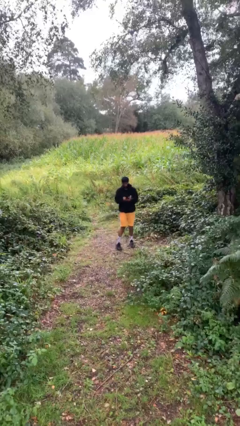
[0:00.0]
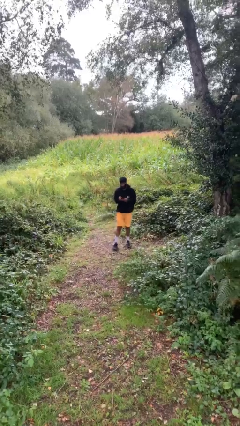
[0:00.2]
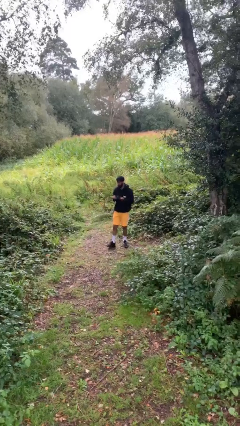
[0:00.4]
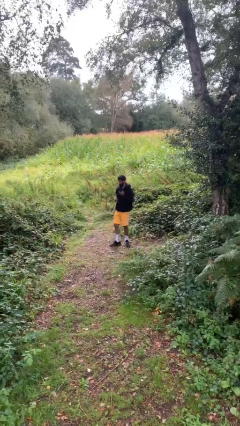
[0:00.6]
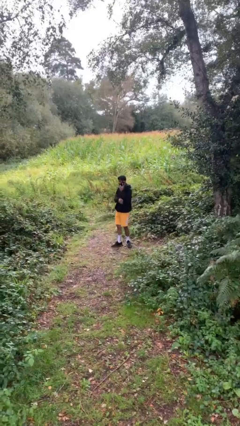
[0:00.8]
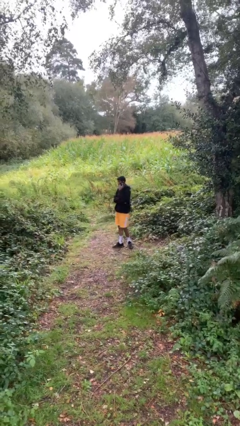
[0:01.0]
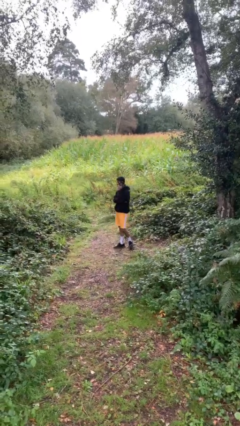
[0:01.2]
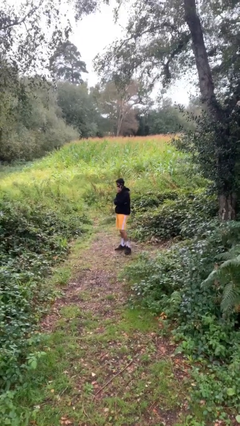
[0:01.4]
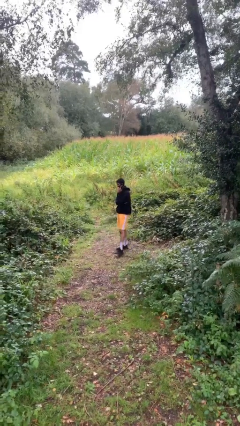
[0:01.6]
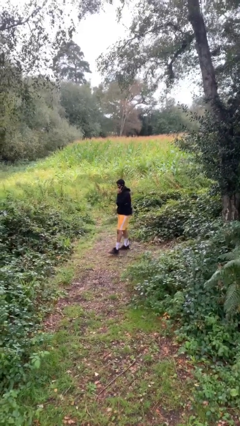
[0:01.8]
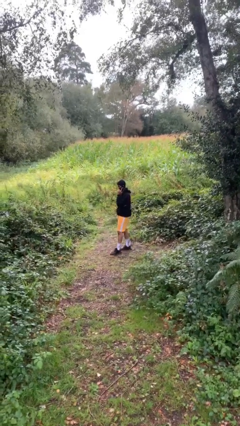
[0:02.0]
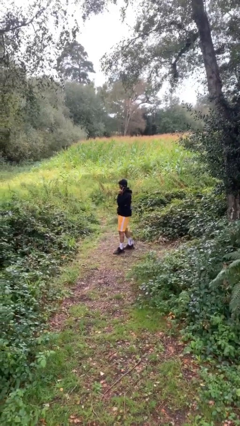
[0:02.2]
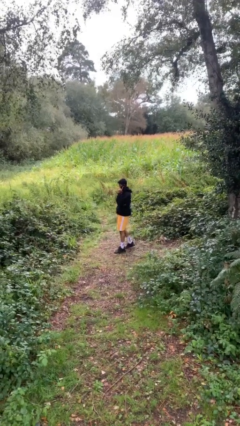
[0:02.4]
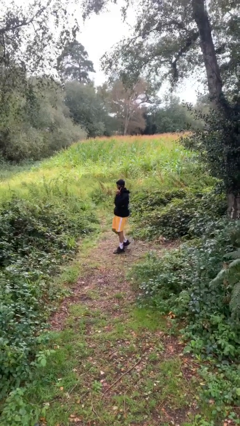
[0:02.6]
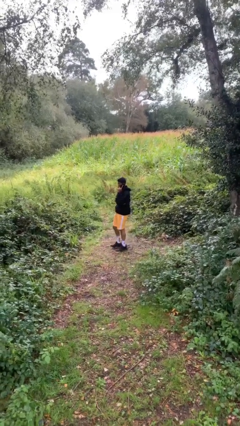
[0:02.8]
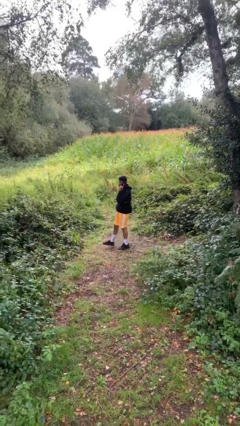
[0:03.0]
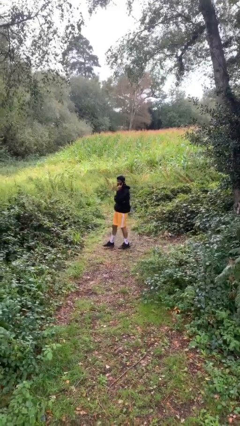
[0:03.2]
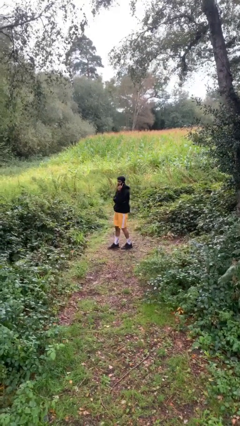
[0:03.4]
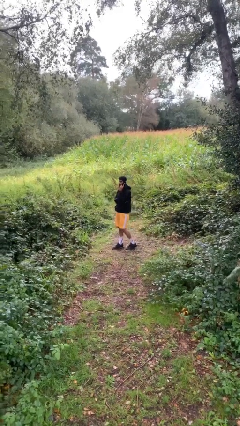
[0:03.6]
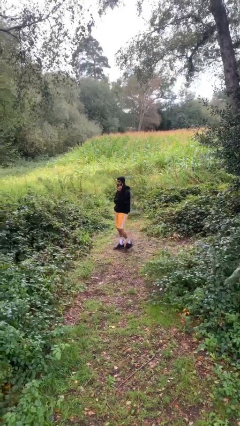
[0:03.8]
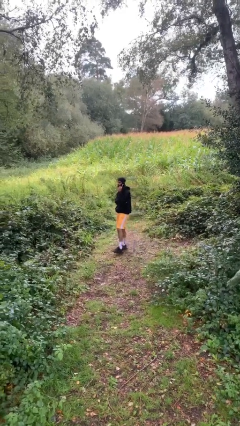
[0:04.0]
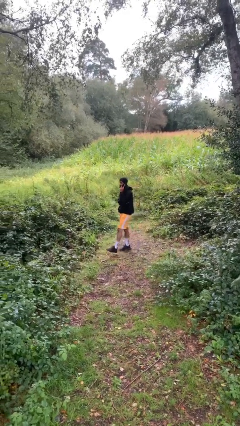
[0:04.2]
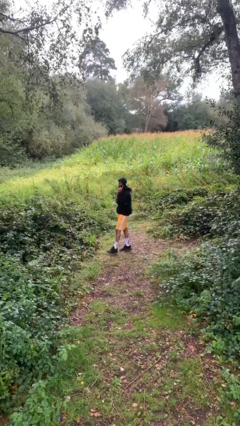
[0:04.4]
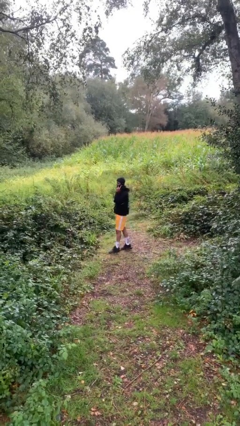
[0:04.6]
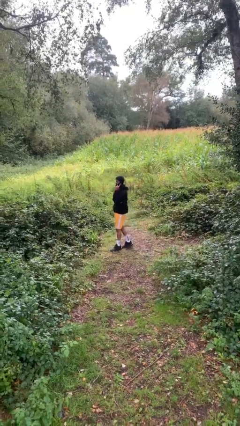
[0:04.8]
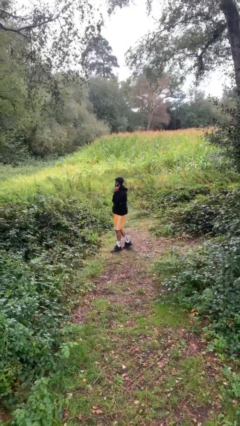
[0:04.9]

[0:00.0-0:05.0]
person talks on phone

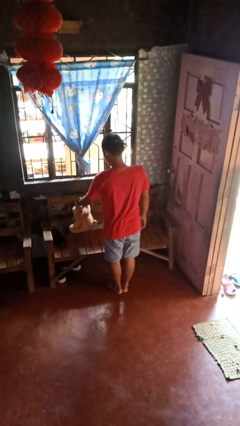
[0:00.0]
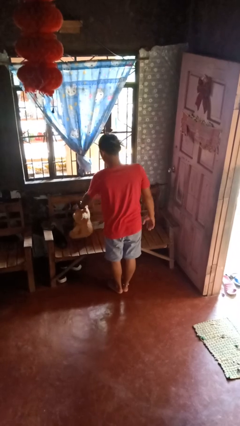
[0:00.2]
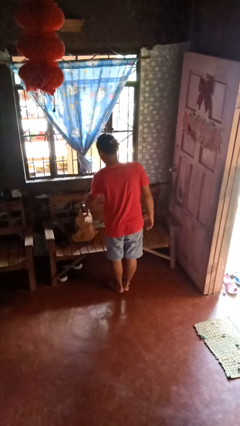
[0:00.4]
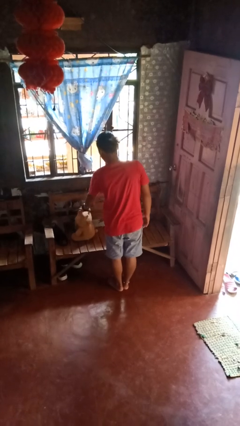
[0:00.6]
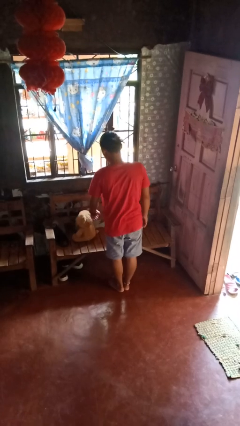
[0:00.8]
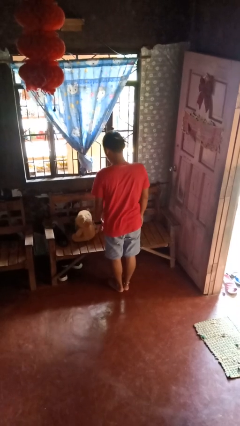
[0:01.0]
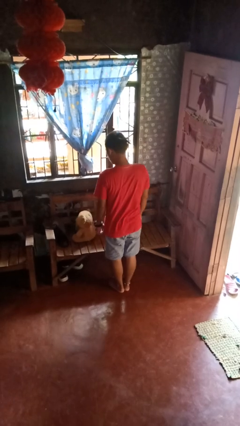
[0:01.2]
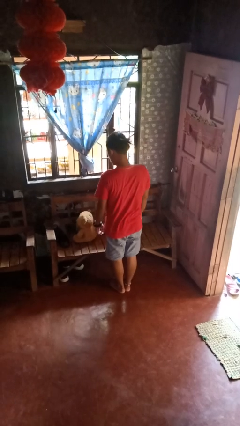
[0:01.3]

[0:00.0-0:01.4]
person puts down object on couch

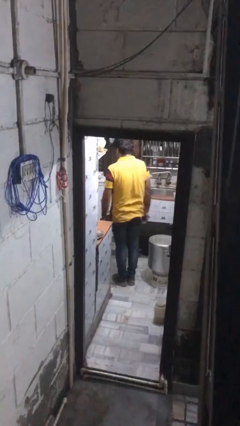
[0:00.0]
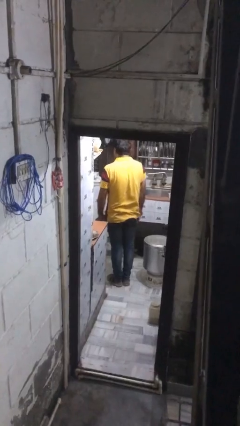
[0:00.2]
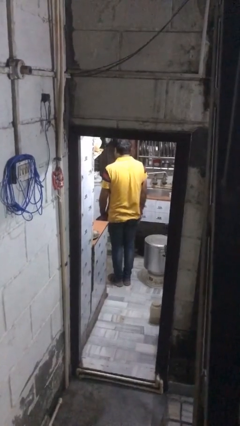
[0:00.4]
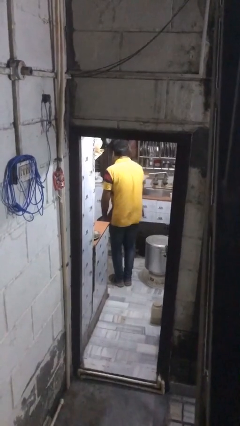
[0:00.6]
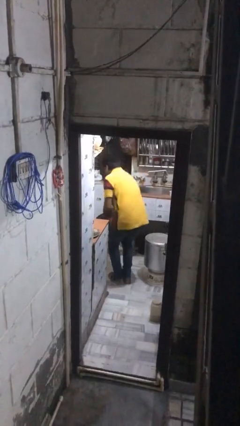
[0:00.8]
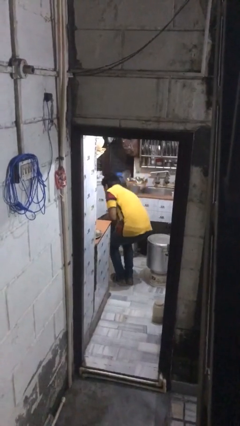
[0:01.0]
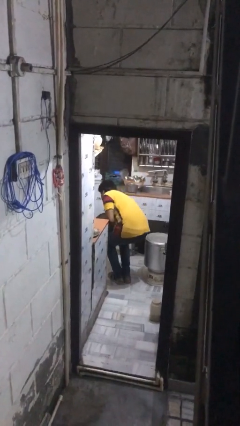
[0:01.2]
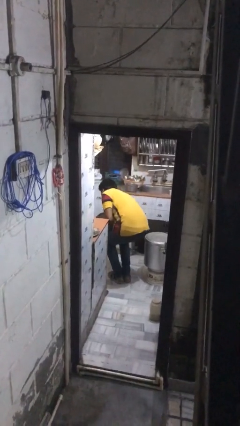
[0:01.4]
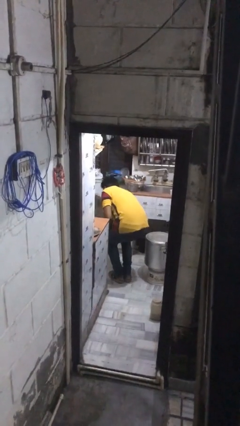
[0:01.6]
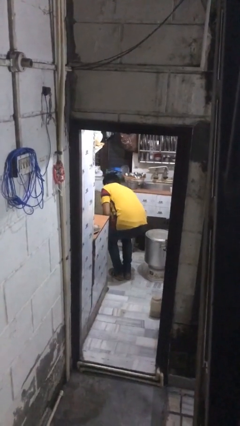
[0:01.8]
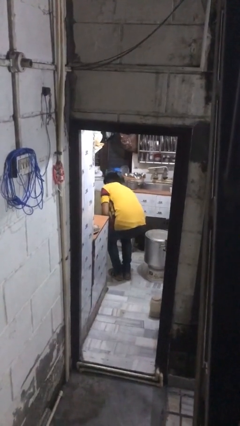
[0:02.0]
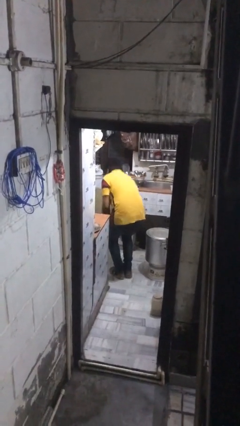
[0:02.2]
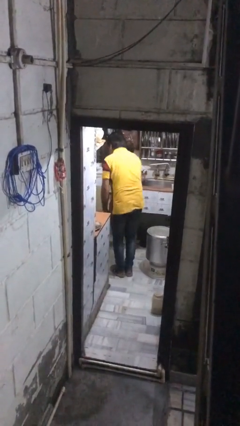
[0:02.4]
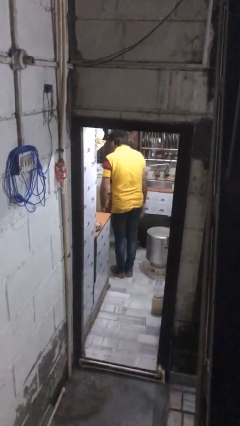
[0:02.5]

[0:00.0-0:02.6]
person opens kitchen drawer

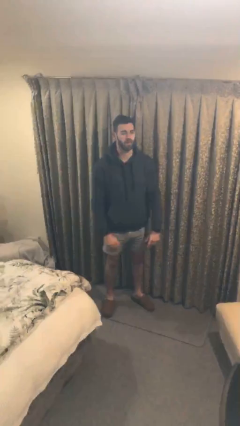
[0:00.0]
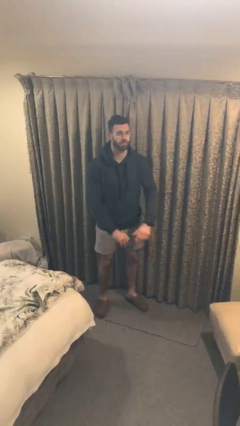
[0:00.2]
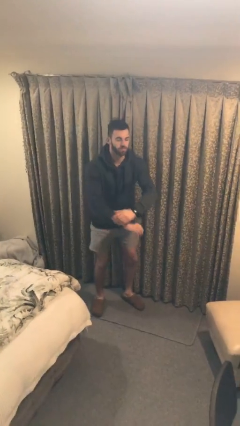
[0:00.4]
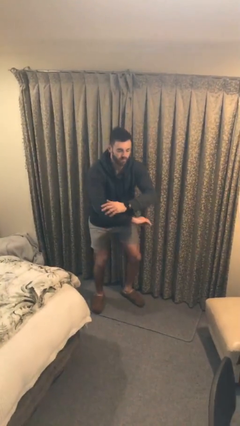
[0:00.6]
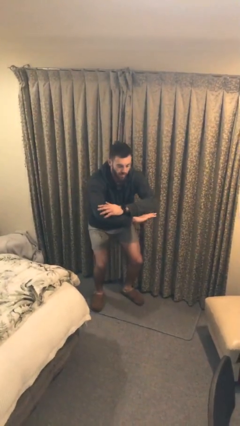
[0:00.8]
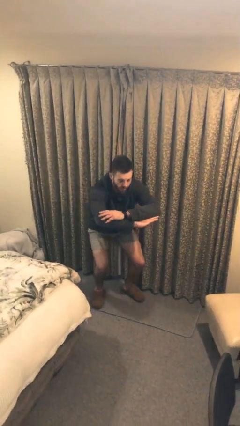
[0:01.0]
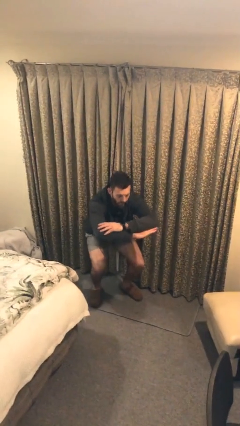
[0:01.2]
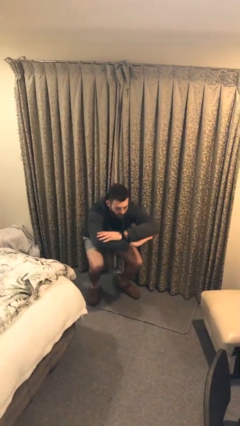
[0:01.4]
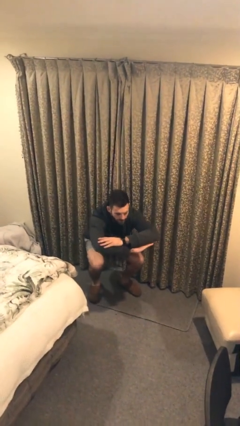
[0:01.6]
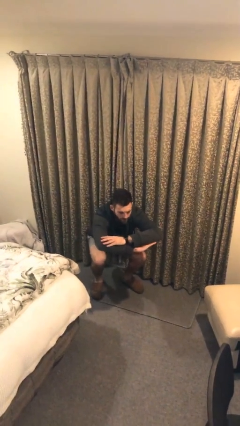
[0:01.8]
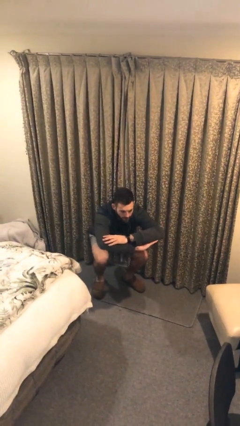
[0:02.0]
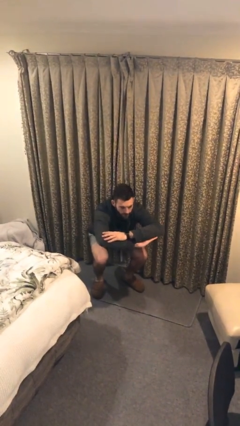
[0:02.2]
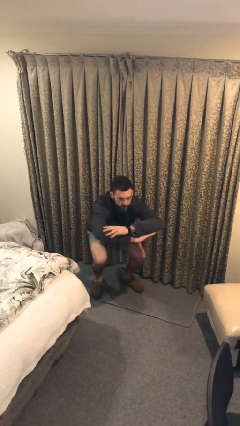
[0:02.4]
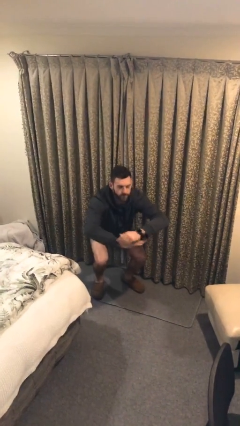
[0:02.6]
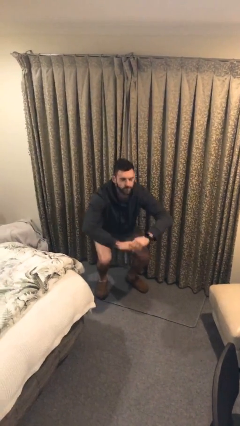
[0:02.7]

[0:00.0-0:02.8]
person squats

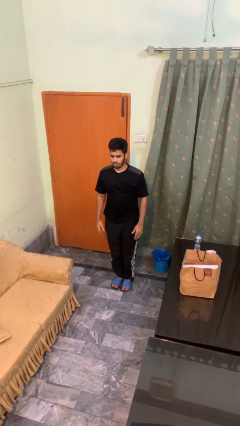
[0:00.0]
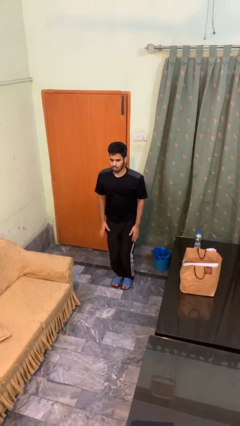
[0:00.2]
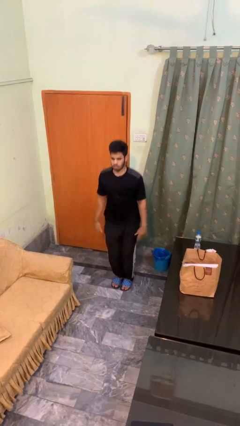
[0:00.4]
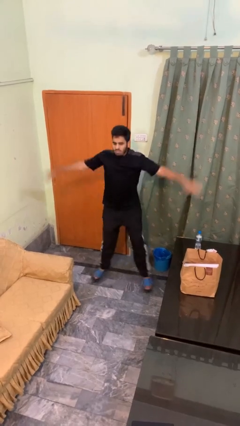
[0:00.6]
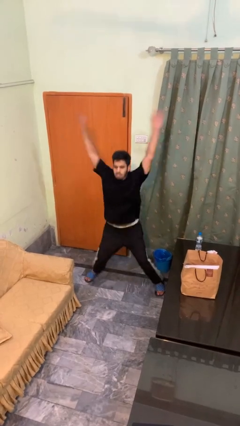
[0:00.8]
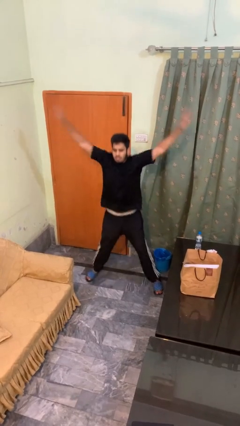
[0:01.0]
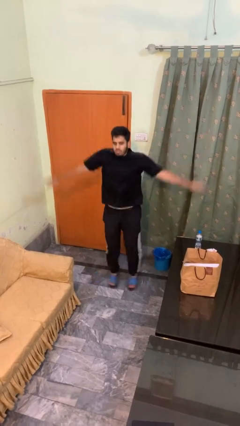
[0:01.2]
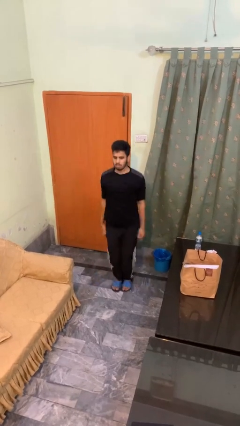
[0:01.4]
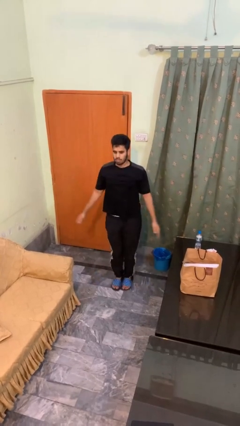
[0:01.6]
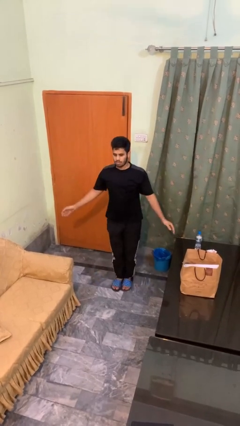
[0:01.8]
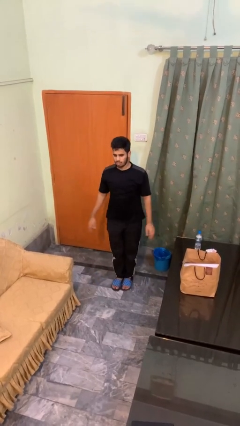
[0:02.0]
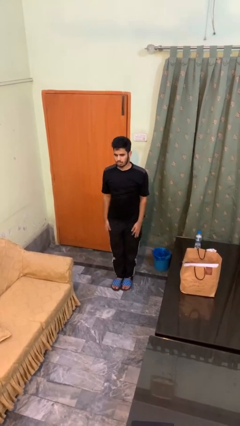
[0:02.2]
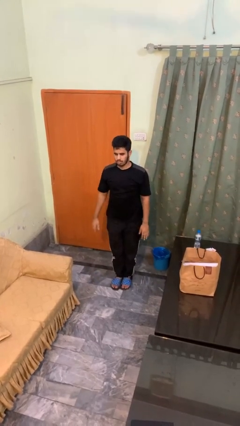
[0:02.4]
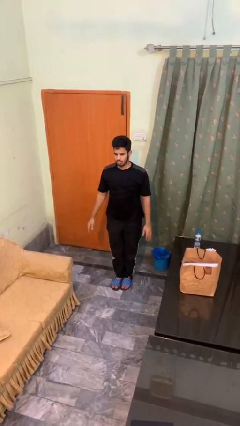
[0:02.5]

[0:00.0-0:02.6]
person exercises with jumping jacks

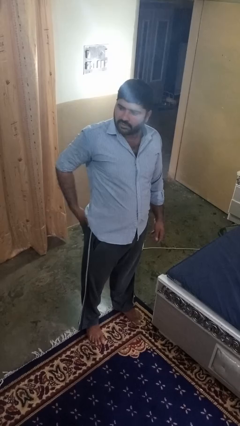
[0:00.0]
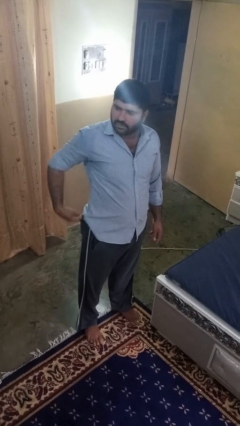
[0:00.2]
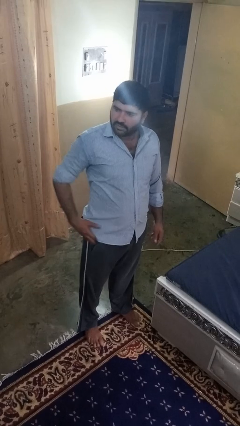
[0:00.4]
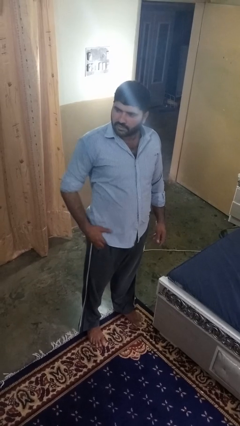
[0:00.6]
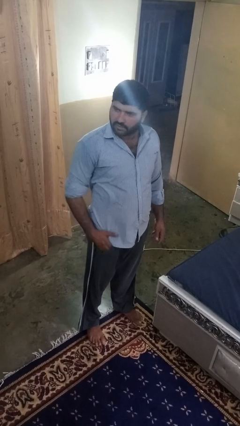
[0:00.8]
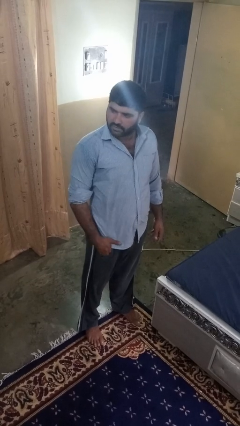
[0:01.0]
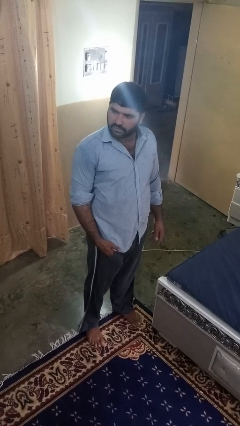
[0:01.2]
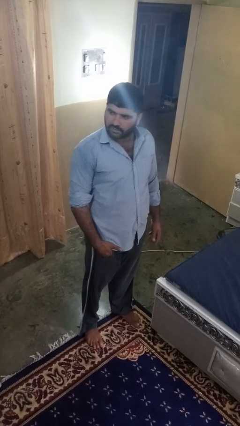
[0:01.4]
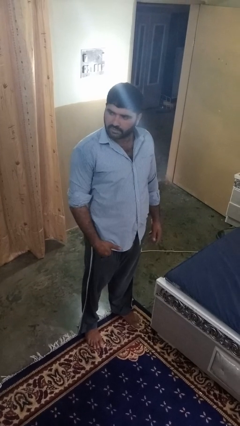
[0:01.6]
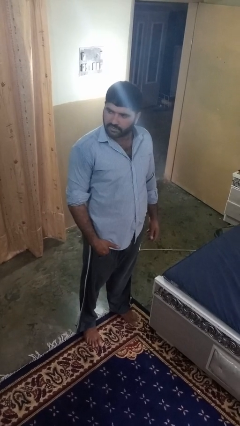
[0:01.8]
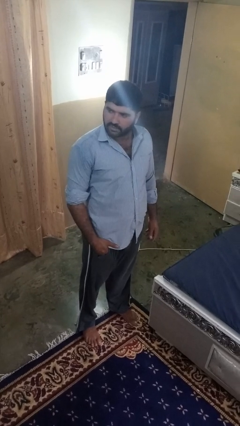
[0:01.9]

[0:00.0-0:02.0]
person puts hands in back pockets

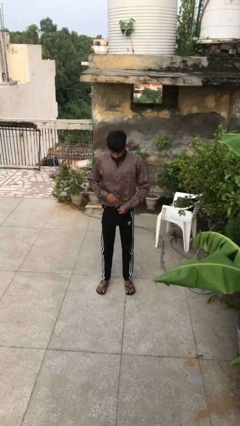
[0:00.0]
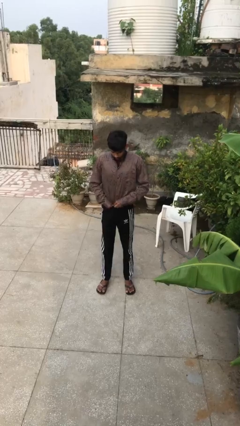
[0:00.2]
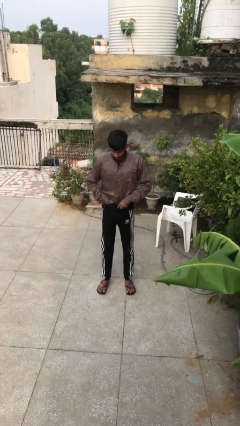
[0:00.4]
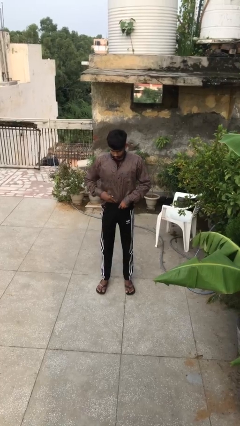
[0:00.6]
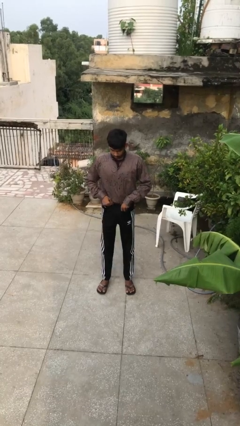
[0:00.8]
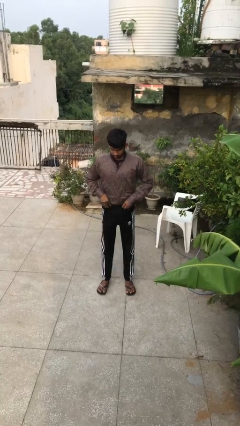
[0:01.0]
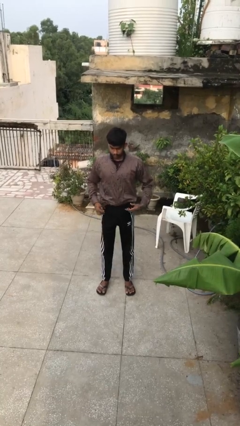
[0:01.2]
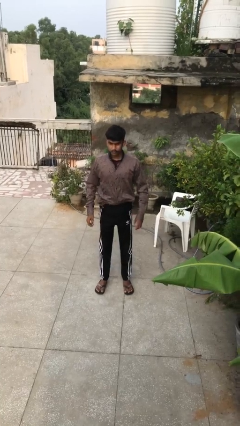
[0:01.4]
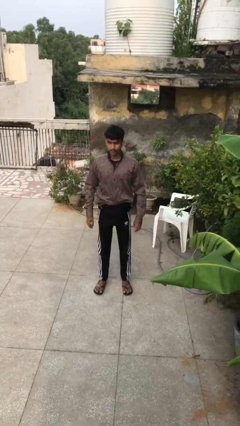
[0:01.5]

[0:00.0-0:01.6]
person tucks in shirt
